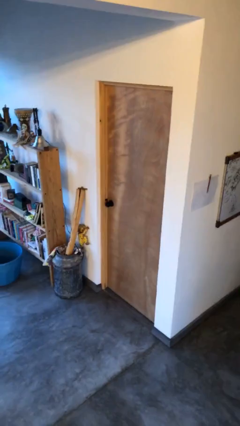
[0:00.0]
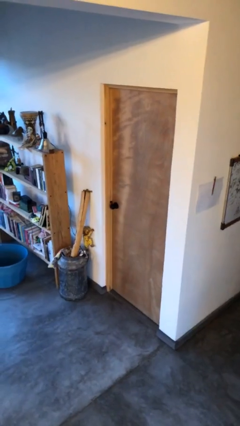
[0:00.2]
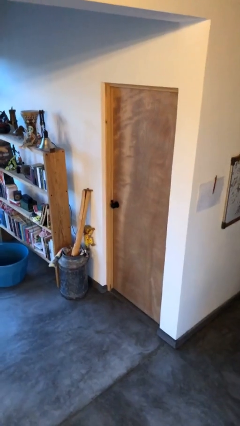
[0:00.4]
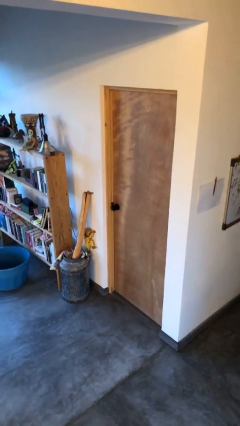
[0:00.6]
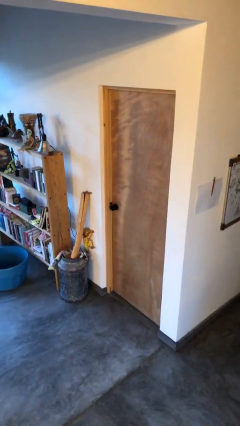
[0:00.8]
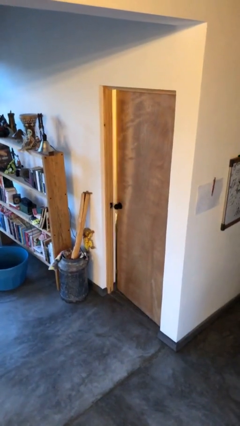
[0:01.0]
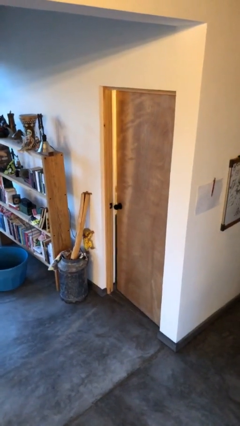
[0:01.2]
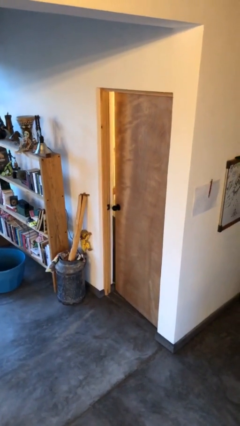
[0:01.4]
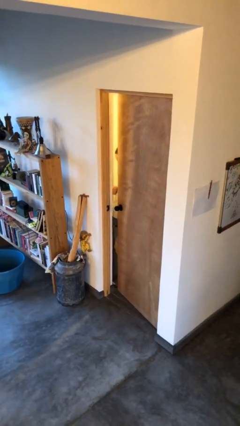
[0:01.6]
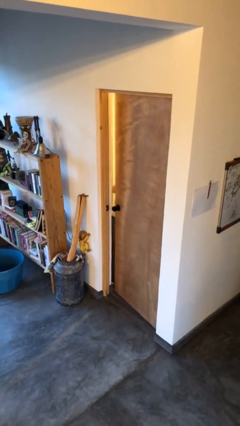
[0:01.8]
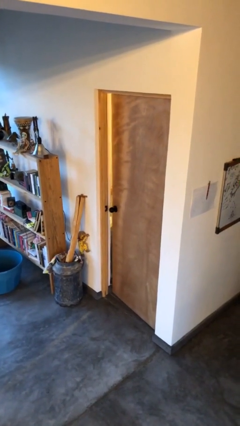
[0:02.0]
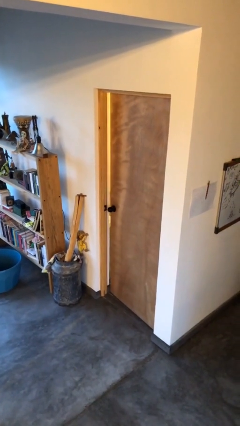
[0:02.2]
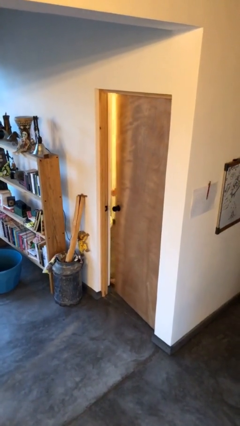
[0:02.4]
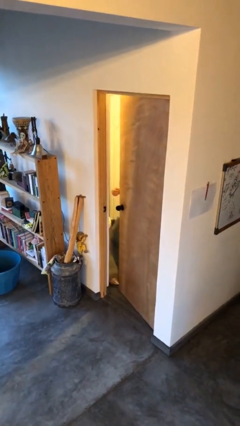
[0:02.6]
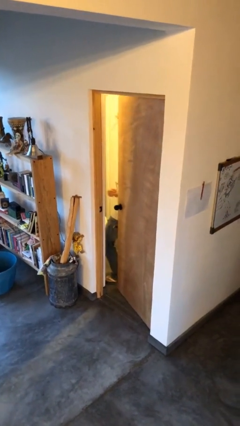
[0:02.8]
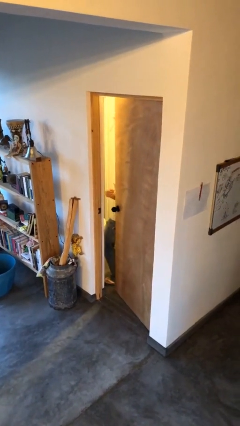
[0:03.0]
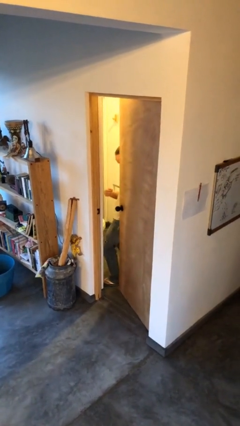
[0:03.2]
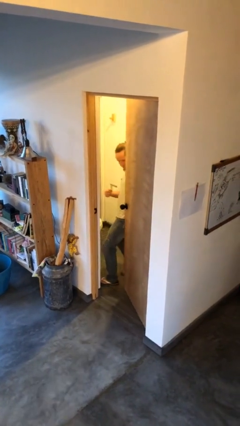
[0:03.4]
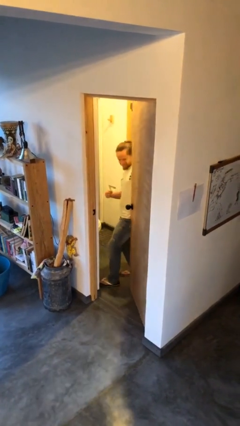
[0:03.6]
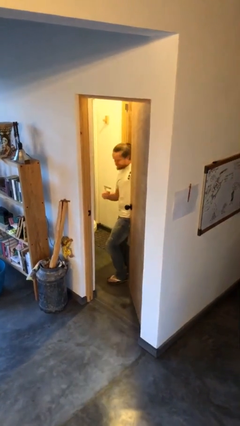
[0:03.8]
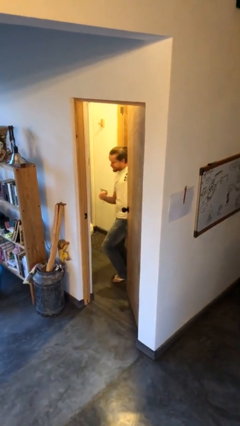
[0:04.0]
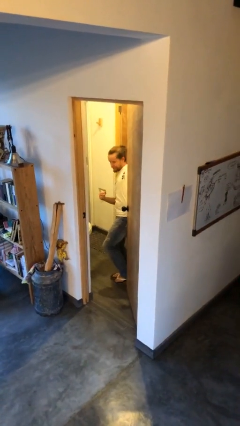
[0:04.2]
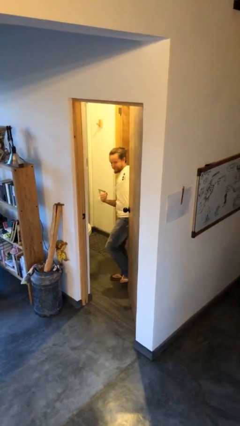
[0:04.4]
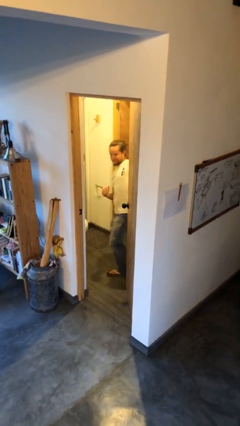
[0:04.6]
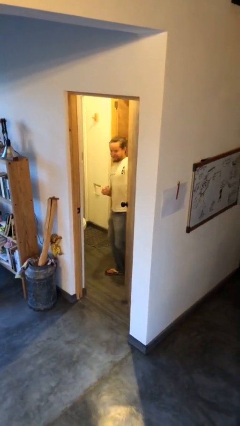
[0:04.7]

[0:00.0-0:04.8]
person opens facility door

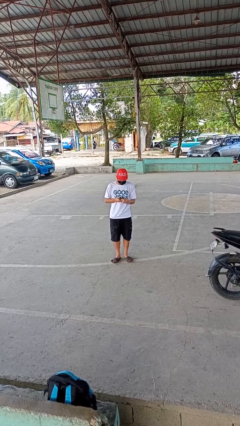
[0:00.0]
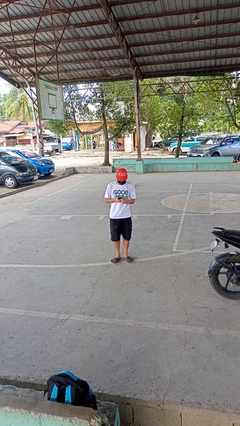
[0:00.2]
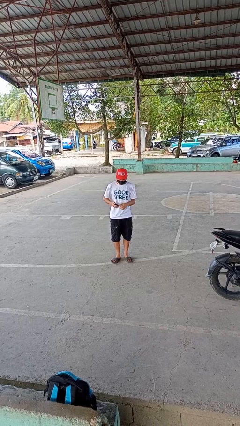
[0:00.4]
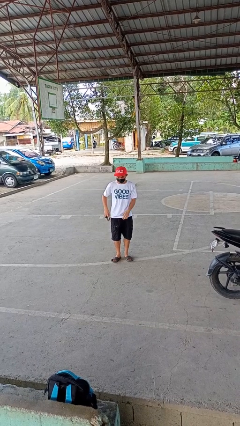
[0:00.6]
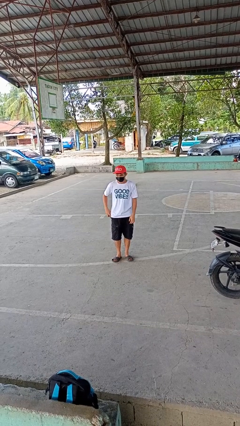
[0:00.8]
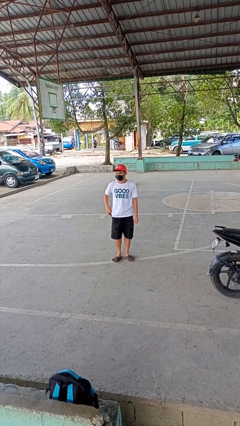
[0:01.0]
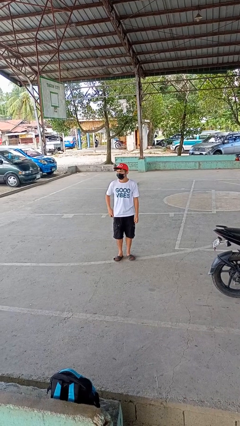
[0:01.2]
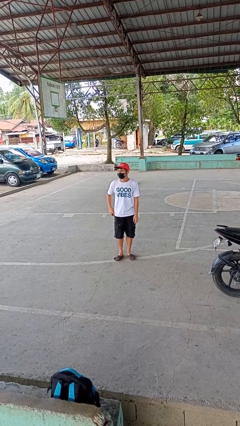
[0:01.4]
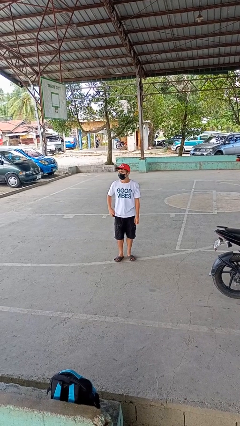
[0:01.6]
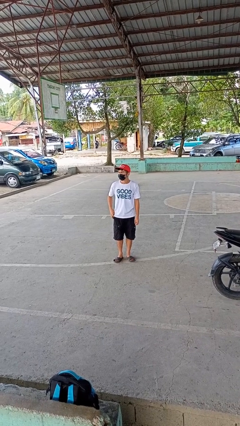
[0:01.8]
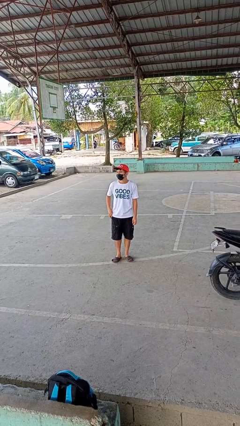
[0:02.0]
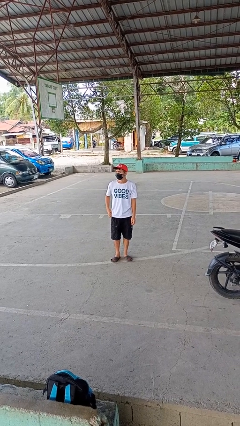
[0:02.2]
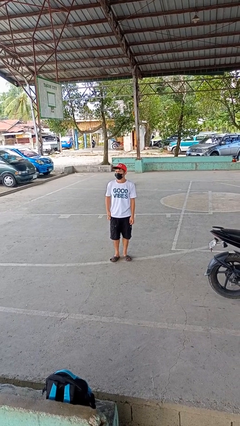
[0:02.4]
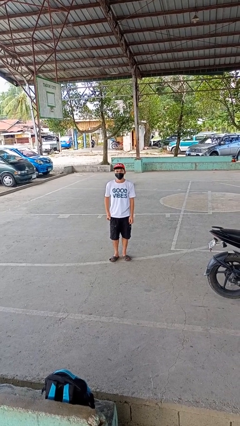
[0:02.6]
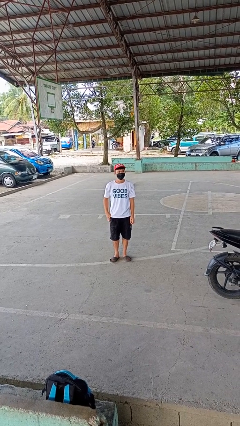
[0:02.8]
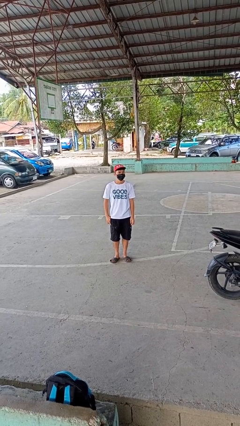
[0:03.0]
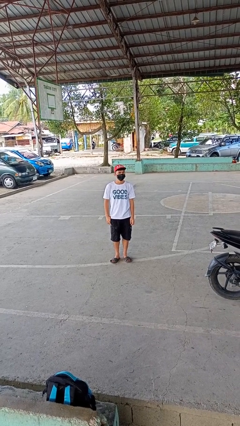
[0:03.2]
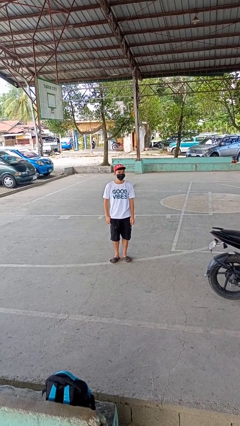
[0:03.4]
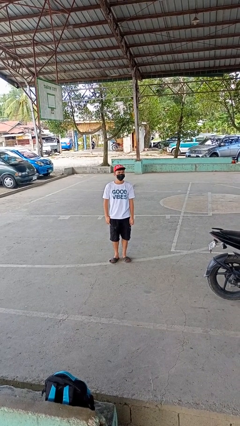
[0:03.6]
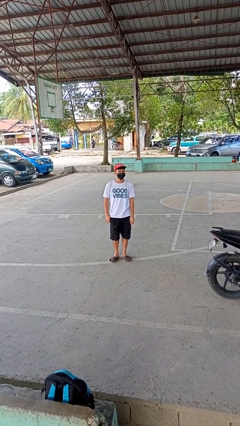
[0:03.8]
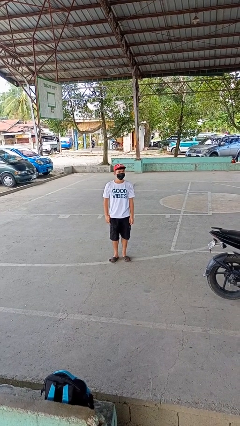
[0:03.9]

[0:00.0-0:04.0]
person puts phone into pocket

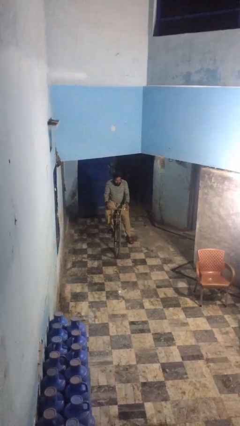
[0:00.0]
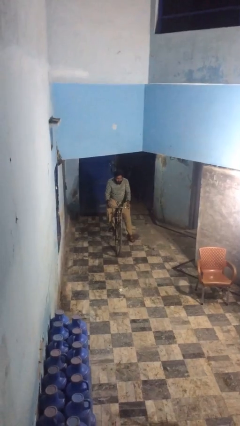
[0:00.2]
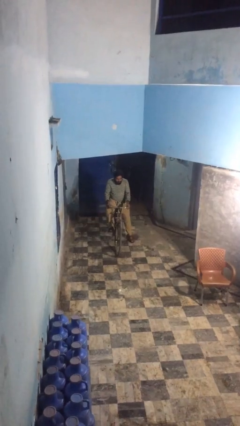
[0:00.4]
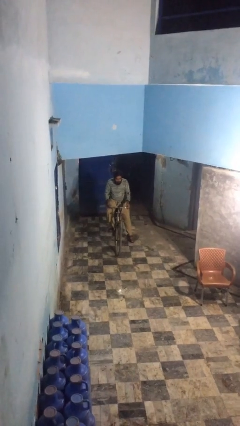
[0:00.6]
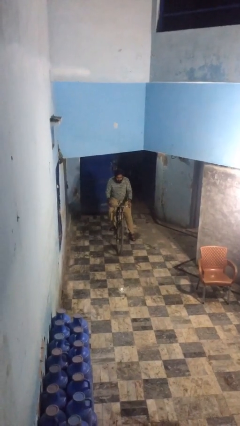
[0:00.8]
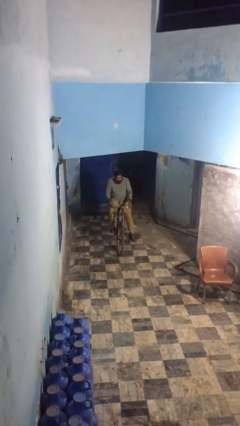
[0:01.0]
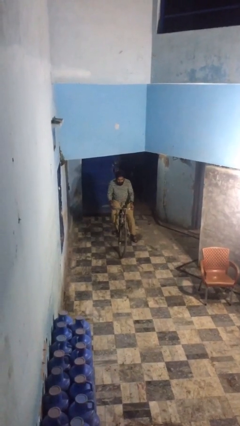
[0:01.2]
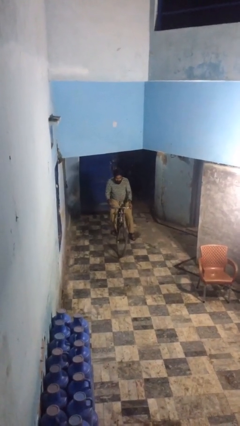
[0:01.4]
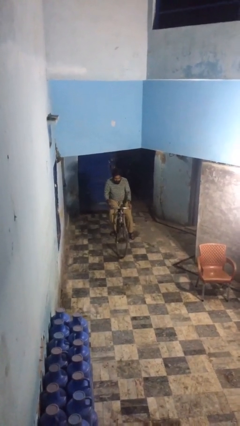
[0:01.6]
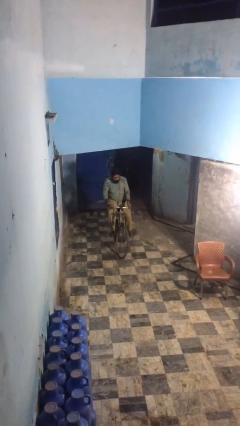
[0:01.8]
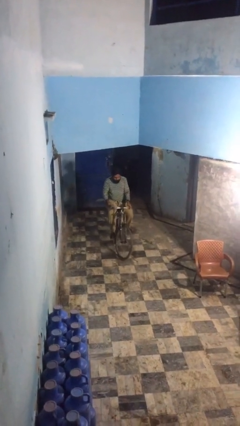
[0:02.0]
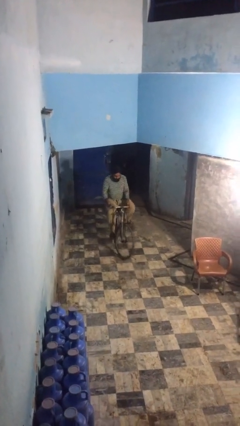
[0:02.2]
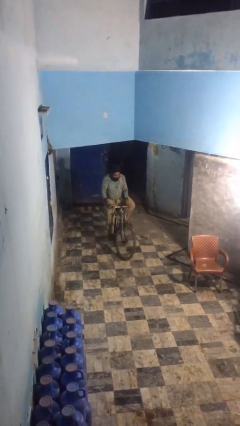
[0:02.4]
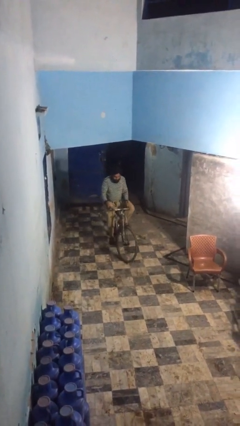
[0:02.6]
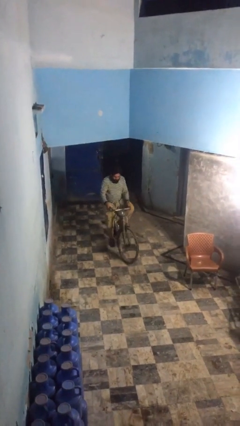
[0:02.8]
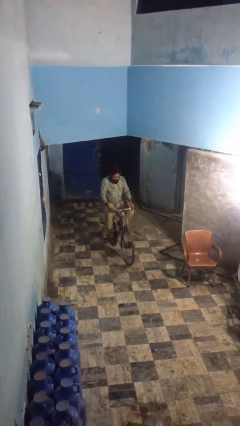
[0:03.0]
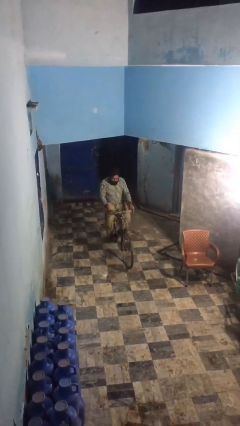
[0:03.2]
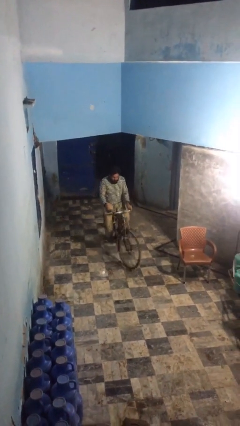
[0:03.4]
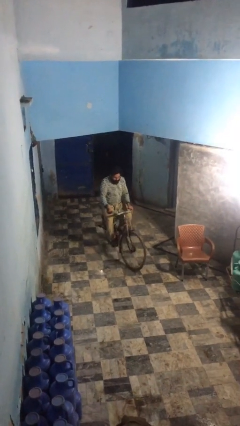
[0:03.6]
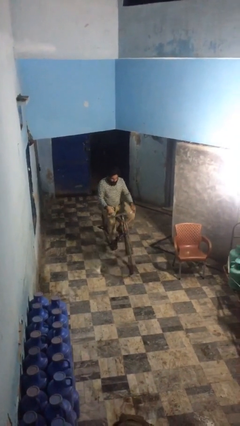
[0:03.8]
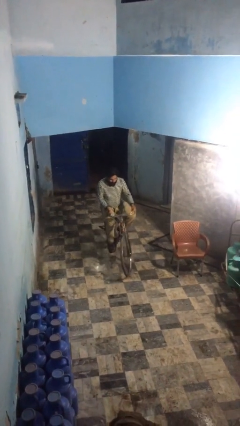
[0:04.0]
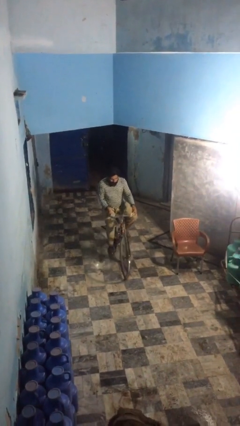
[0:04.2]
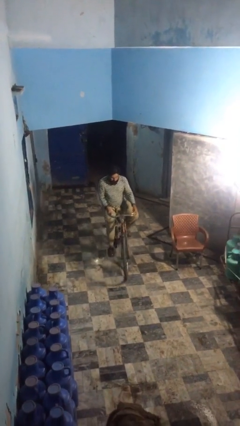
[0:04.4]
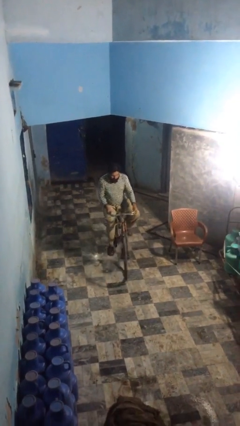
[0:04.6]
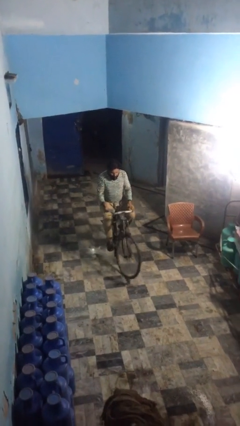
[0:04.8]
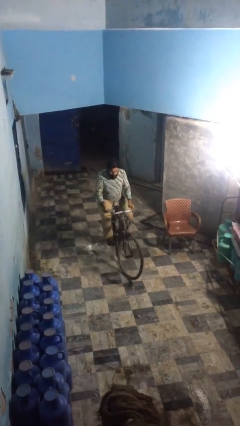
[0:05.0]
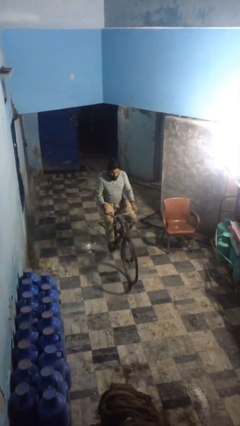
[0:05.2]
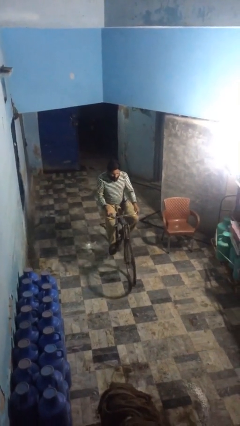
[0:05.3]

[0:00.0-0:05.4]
person rides bicycle

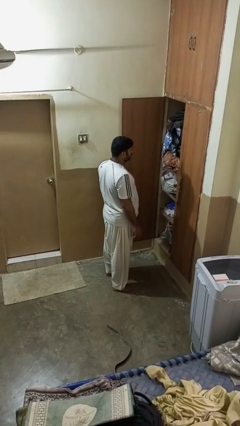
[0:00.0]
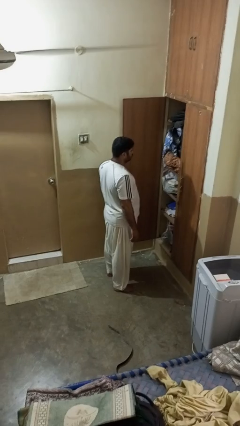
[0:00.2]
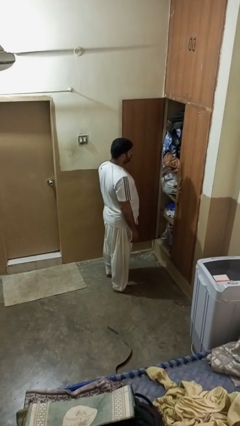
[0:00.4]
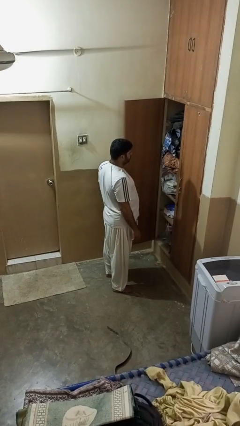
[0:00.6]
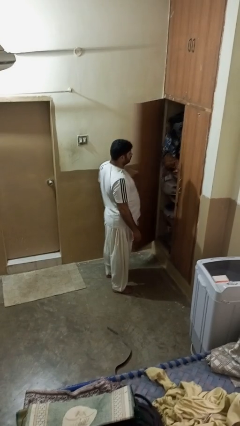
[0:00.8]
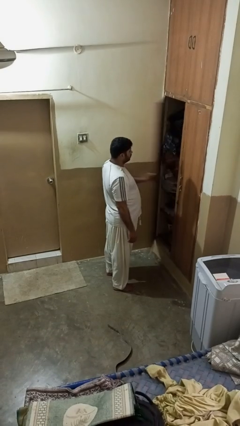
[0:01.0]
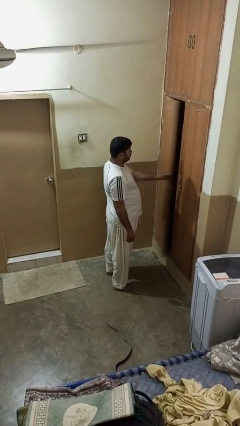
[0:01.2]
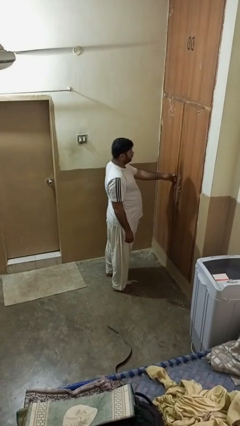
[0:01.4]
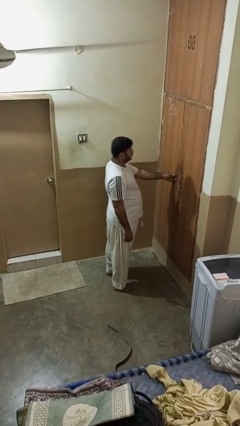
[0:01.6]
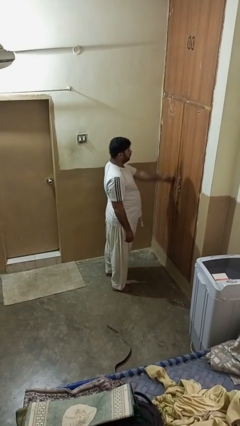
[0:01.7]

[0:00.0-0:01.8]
person closes closet door

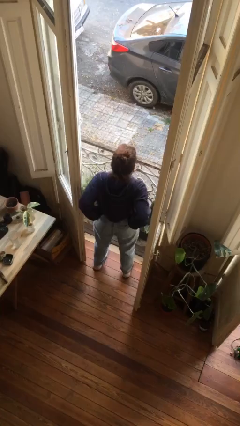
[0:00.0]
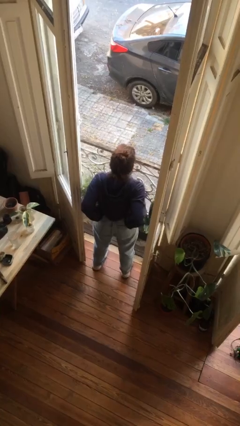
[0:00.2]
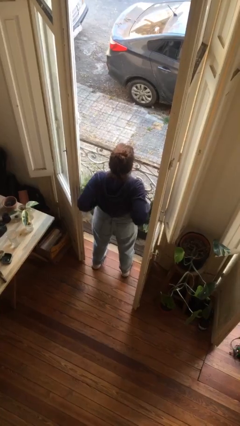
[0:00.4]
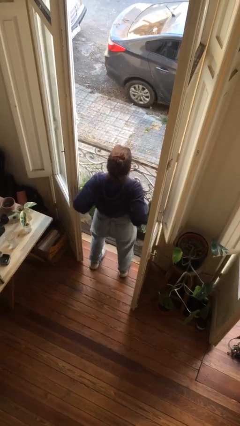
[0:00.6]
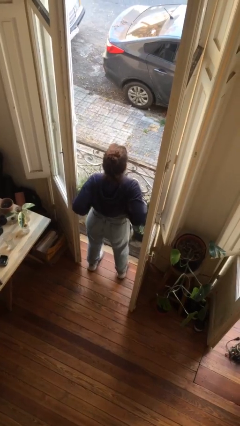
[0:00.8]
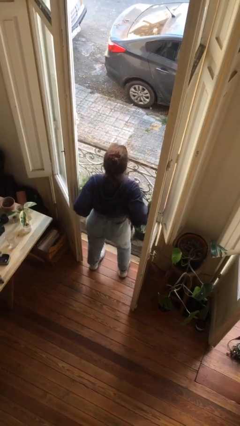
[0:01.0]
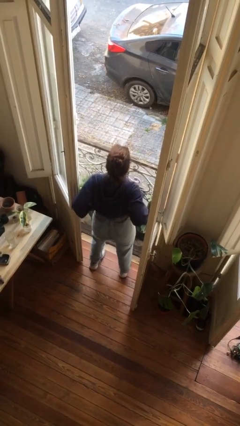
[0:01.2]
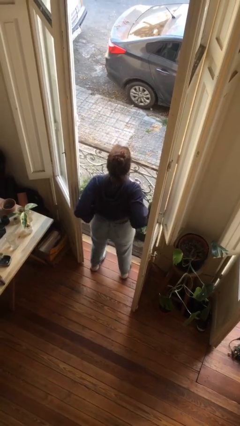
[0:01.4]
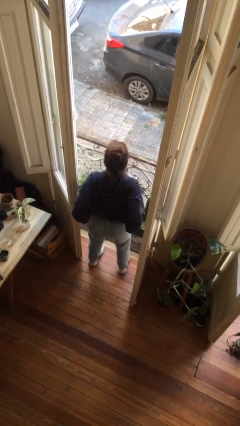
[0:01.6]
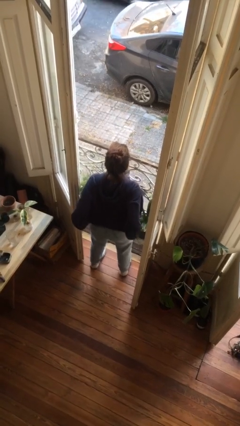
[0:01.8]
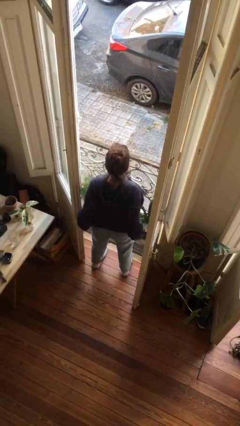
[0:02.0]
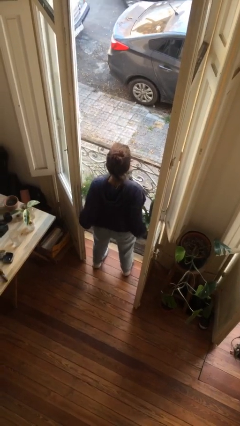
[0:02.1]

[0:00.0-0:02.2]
person hikes up pants
